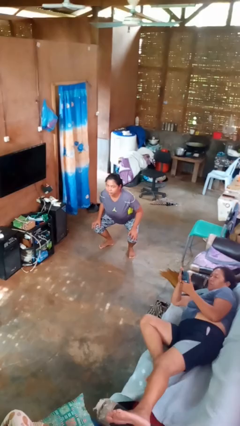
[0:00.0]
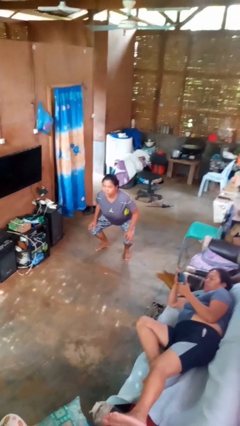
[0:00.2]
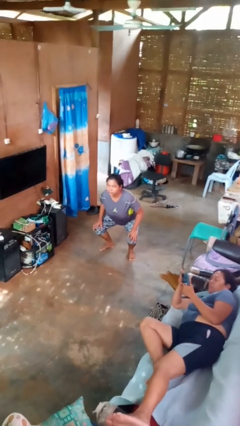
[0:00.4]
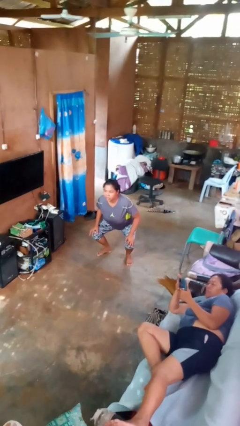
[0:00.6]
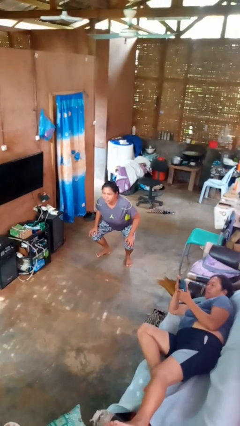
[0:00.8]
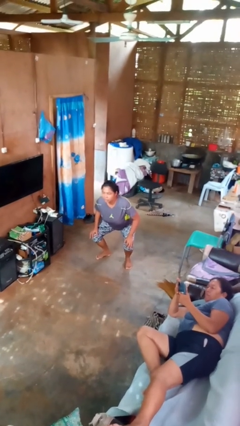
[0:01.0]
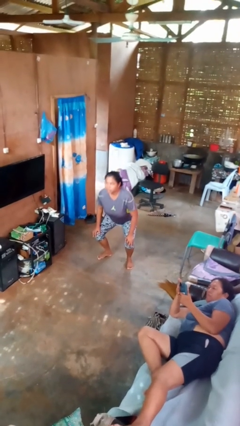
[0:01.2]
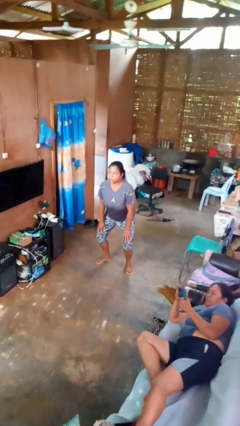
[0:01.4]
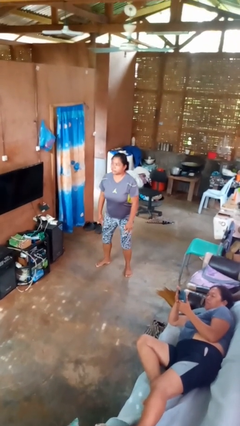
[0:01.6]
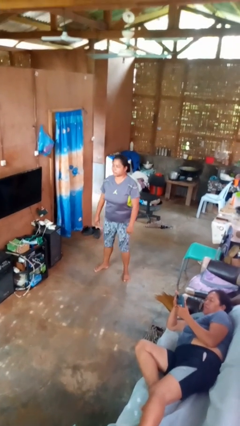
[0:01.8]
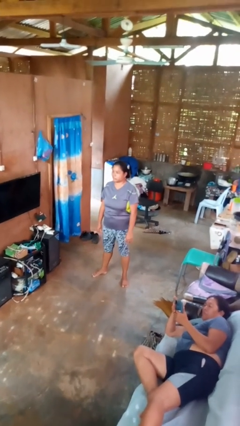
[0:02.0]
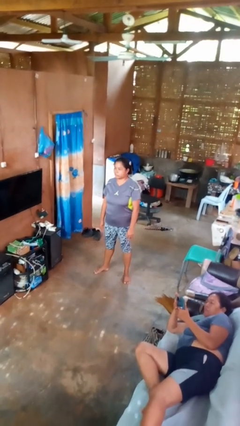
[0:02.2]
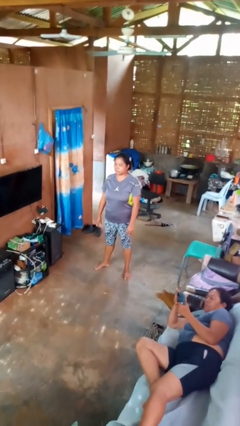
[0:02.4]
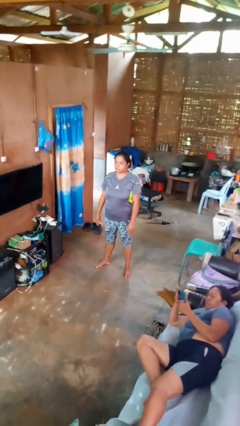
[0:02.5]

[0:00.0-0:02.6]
person stands up

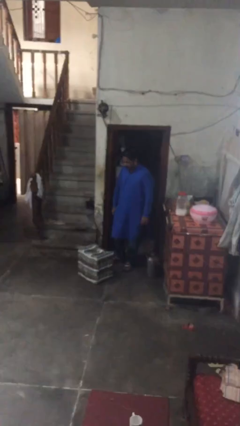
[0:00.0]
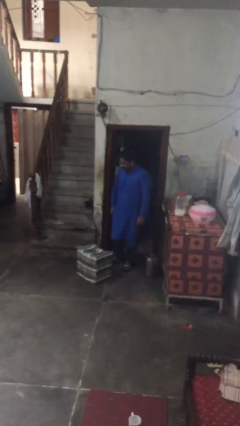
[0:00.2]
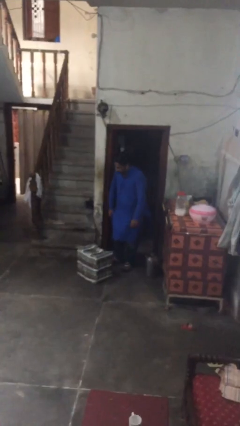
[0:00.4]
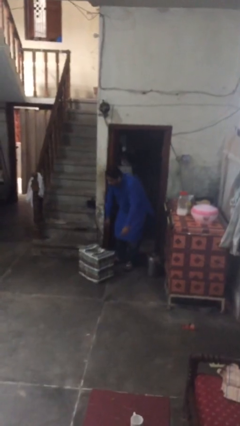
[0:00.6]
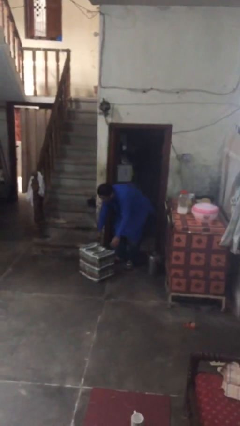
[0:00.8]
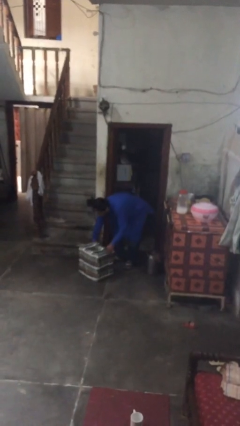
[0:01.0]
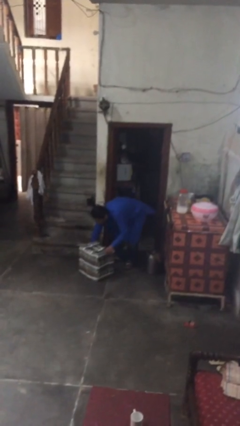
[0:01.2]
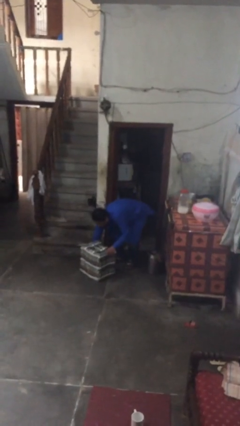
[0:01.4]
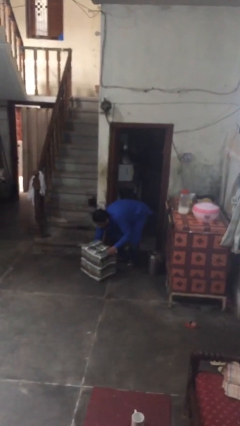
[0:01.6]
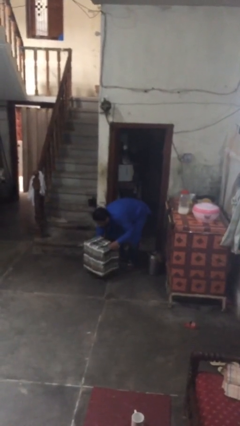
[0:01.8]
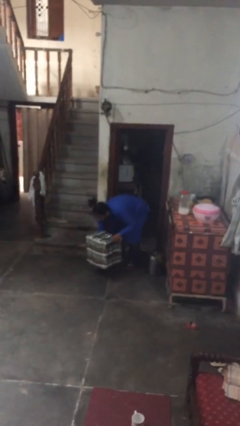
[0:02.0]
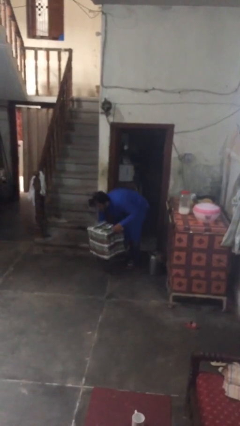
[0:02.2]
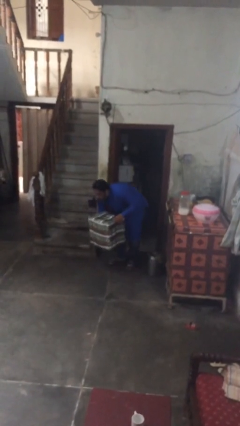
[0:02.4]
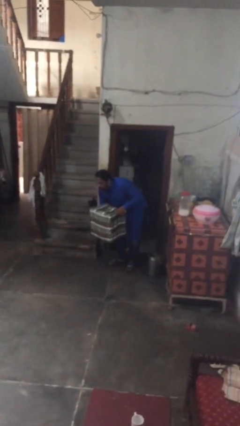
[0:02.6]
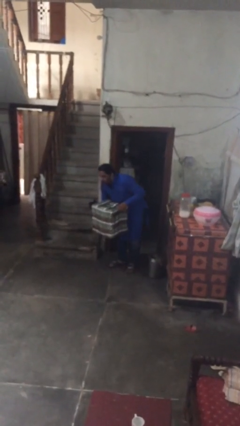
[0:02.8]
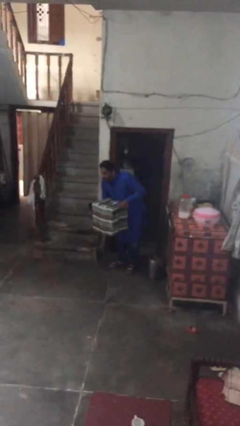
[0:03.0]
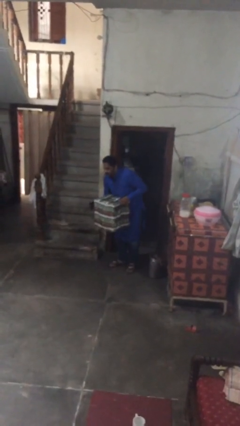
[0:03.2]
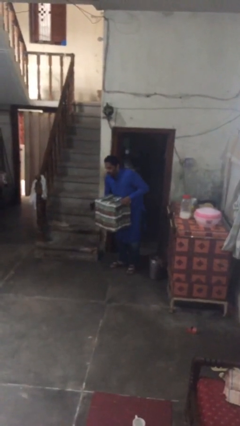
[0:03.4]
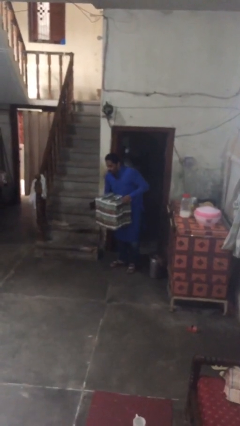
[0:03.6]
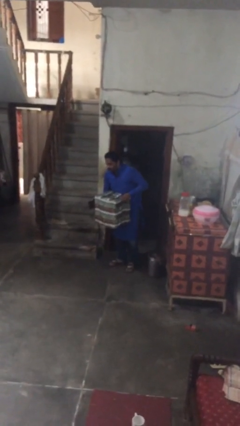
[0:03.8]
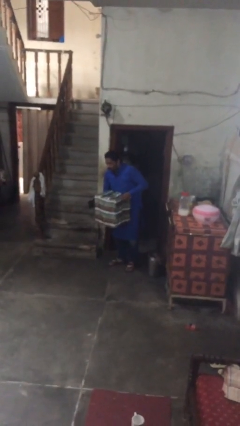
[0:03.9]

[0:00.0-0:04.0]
person picks up object from floor

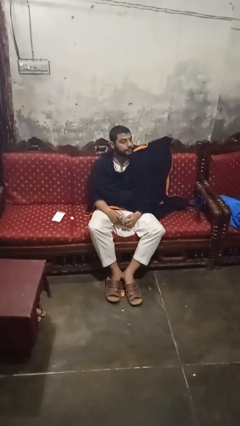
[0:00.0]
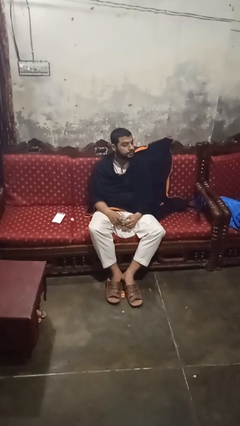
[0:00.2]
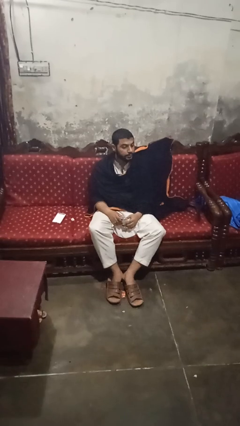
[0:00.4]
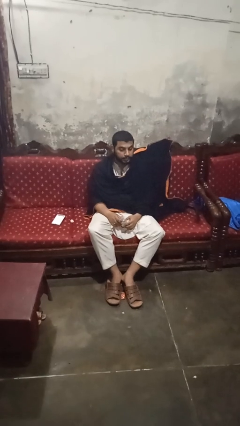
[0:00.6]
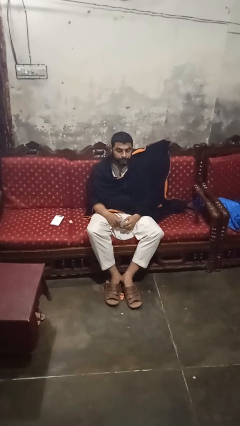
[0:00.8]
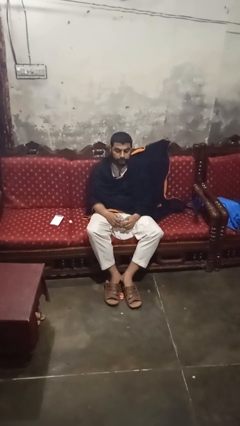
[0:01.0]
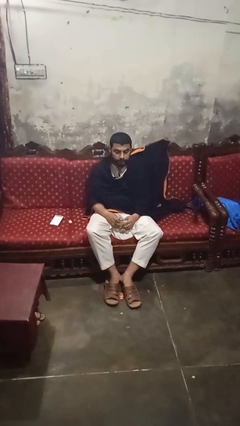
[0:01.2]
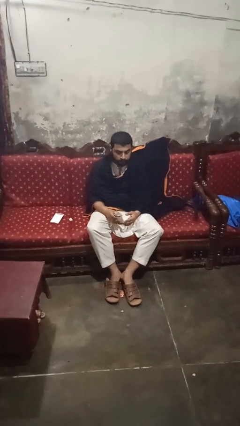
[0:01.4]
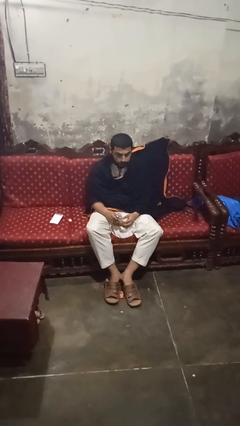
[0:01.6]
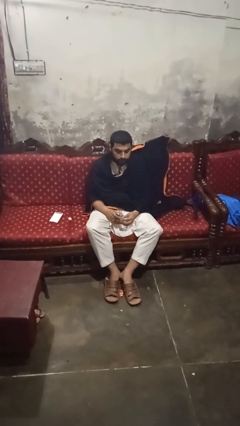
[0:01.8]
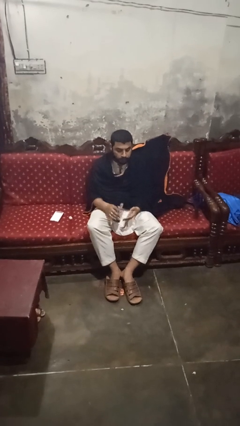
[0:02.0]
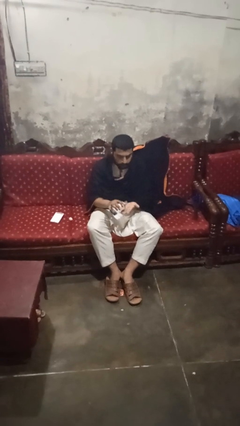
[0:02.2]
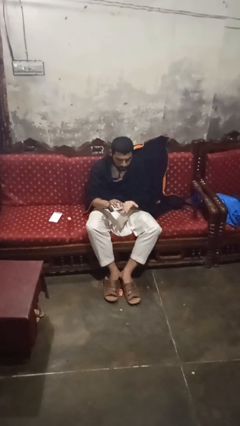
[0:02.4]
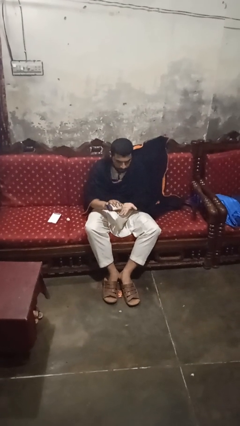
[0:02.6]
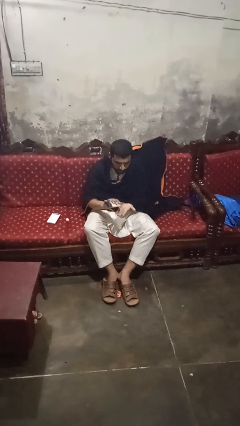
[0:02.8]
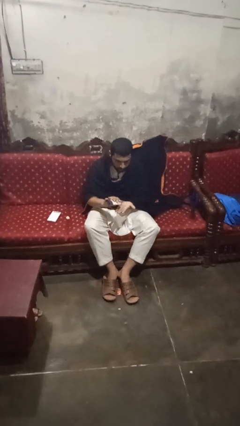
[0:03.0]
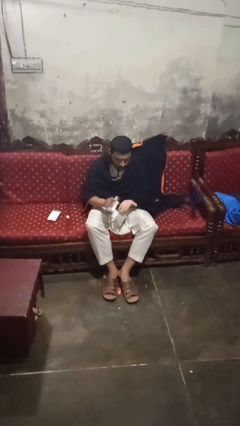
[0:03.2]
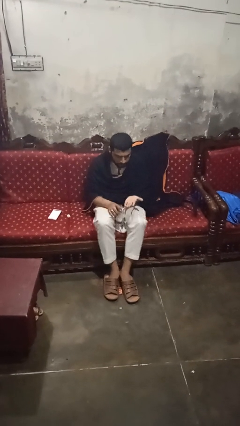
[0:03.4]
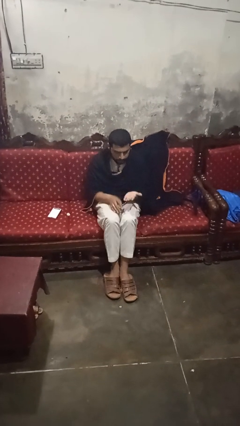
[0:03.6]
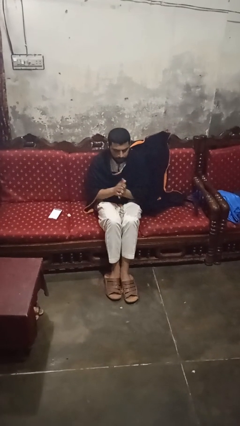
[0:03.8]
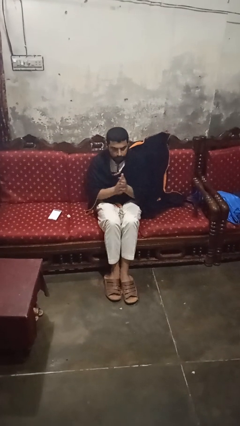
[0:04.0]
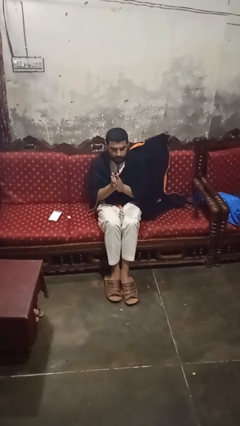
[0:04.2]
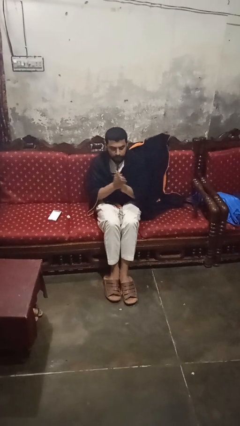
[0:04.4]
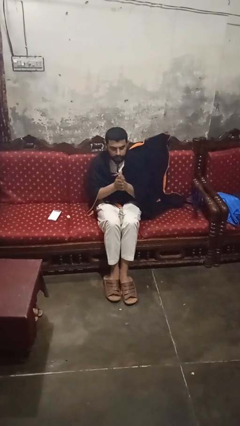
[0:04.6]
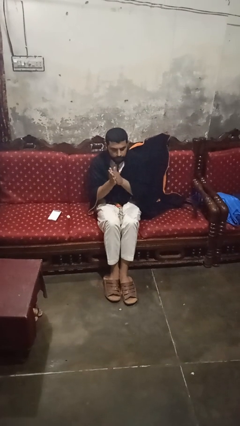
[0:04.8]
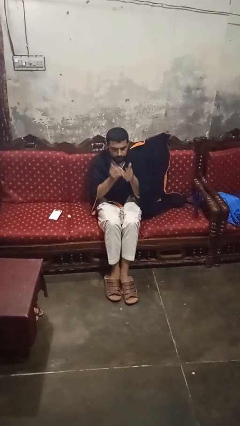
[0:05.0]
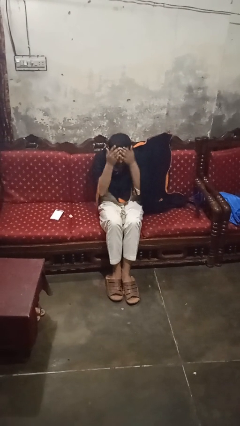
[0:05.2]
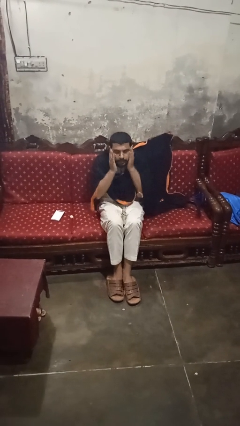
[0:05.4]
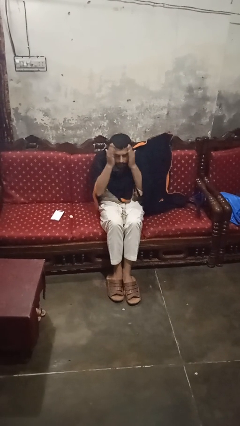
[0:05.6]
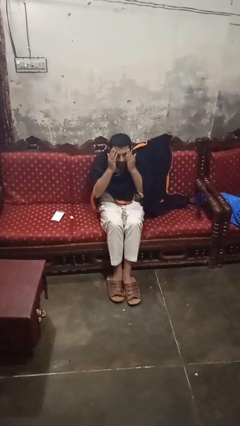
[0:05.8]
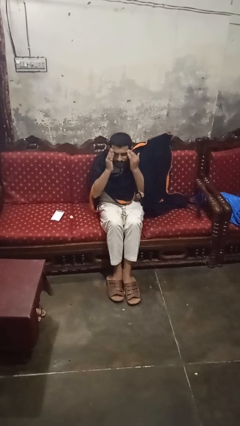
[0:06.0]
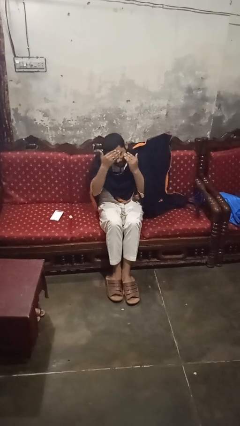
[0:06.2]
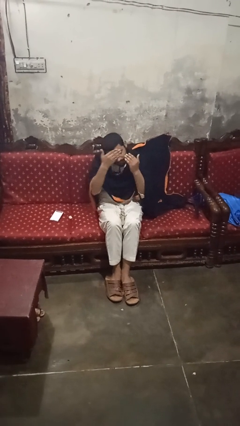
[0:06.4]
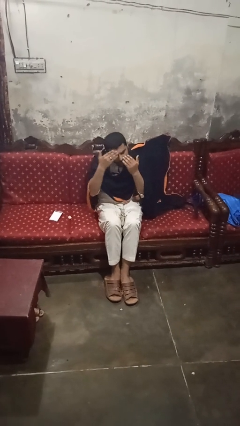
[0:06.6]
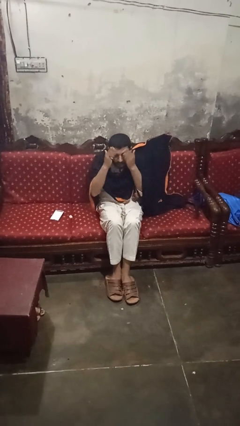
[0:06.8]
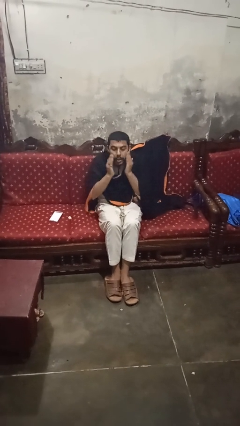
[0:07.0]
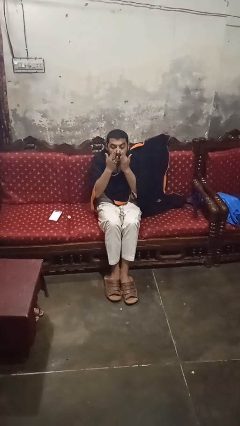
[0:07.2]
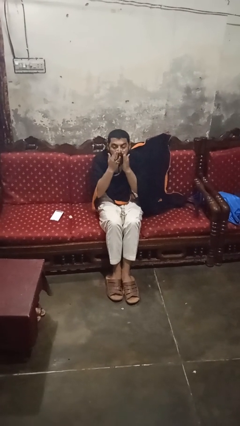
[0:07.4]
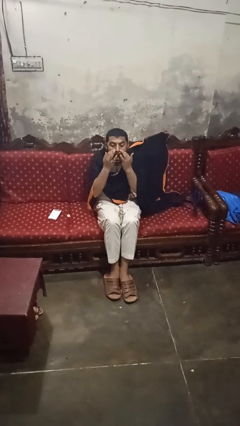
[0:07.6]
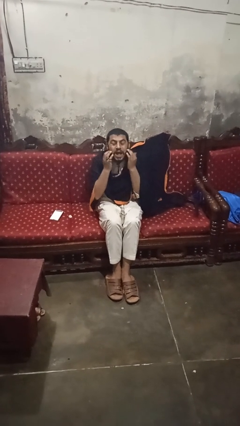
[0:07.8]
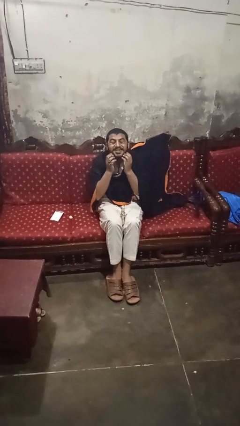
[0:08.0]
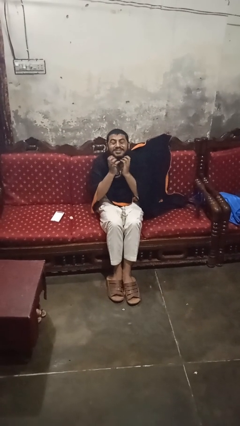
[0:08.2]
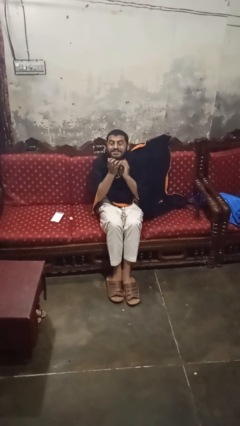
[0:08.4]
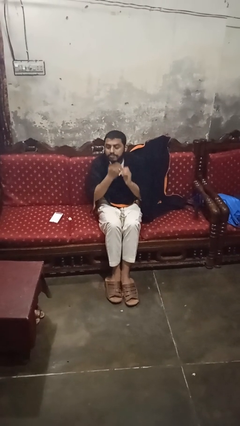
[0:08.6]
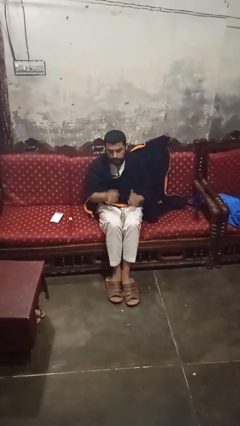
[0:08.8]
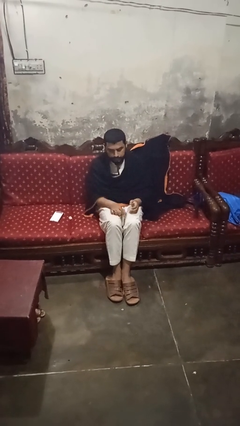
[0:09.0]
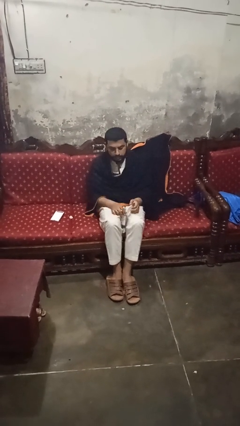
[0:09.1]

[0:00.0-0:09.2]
person applies facial moisturizer

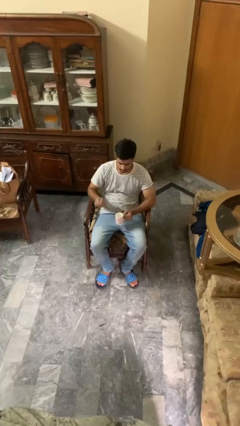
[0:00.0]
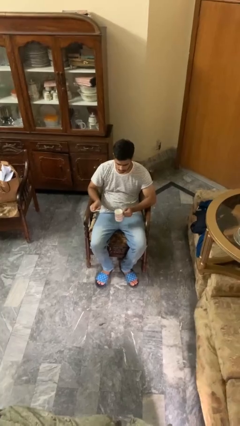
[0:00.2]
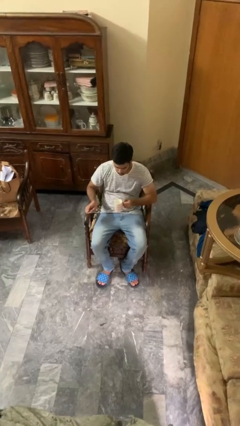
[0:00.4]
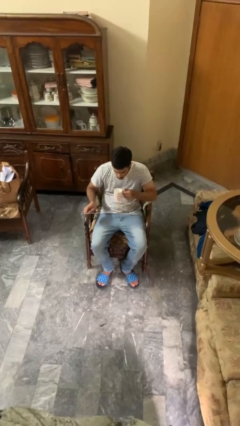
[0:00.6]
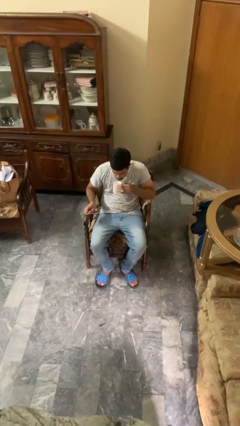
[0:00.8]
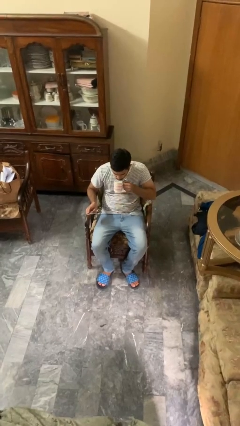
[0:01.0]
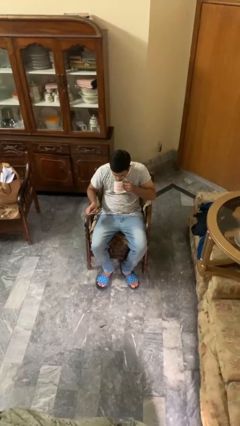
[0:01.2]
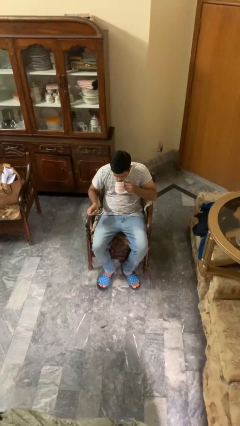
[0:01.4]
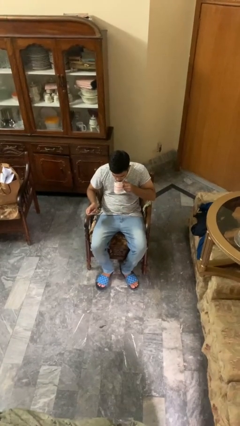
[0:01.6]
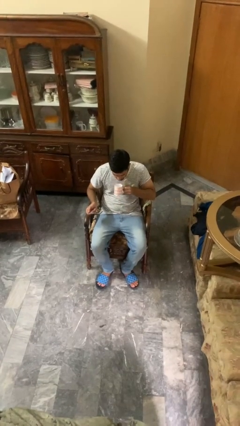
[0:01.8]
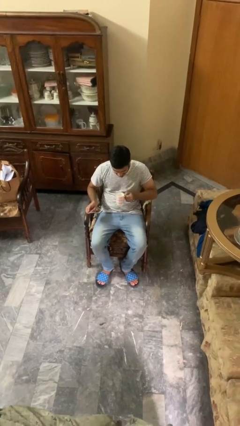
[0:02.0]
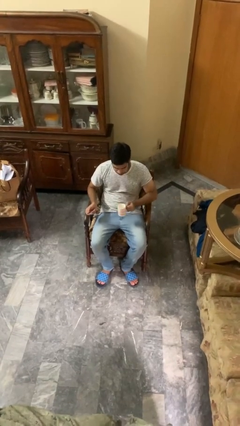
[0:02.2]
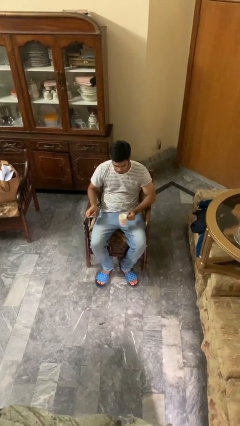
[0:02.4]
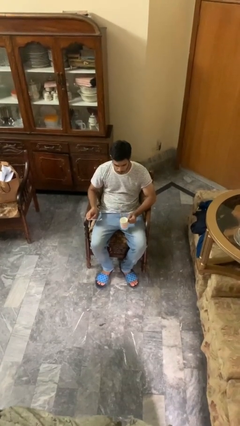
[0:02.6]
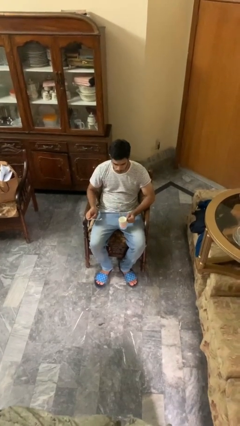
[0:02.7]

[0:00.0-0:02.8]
person drinks from mug
